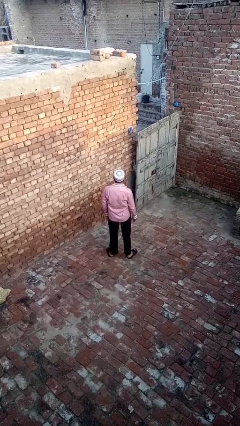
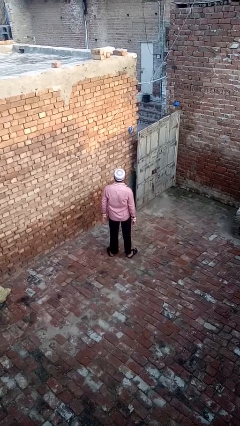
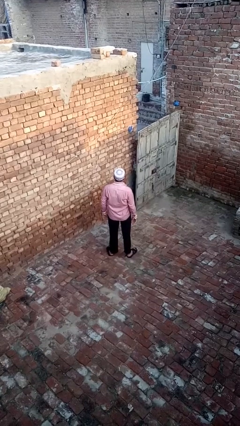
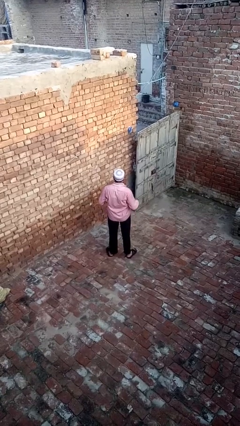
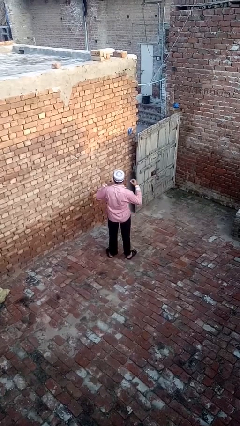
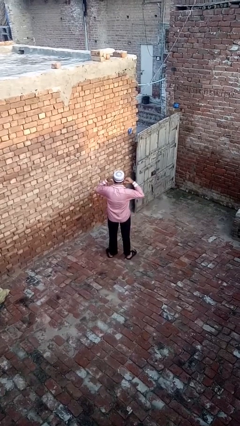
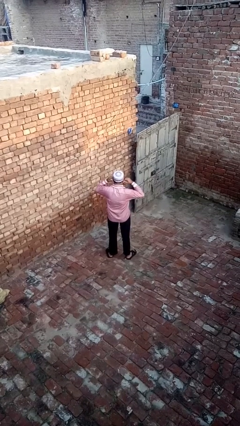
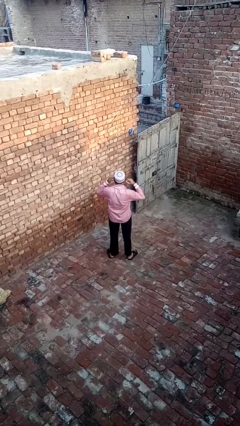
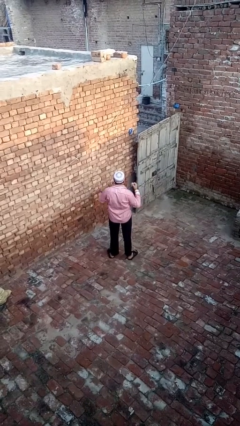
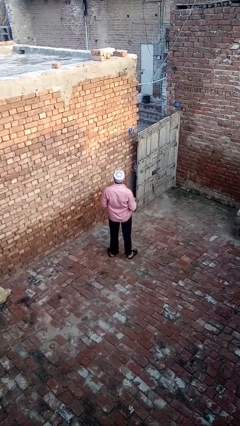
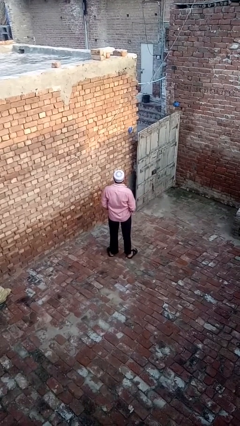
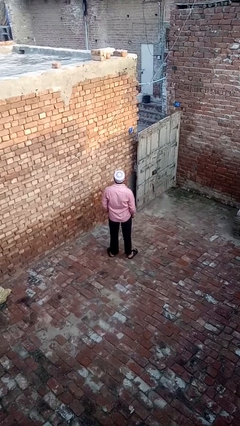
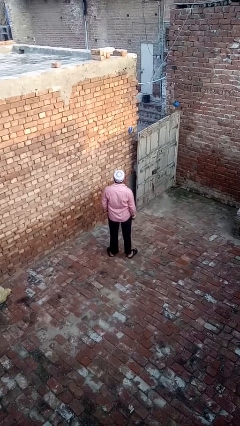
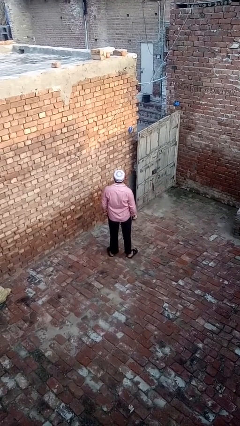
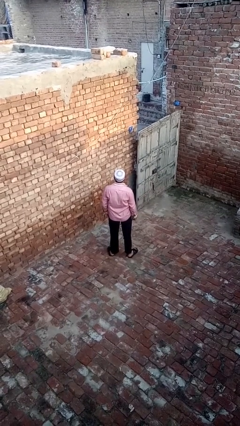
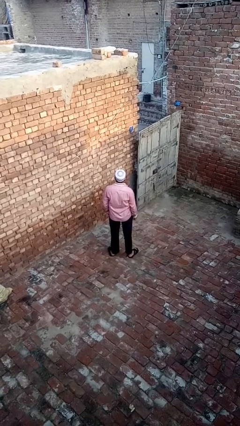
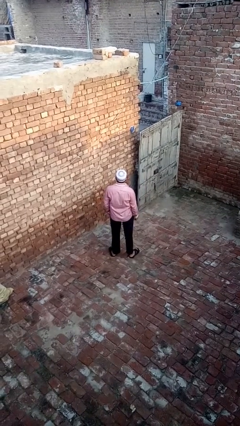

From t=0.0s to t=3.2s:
person takes off headphones

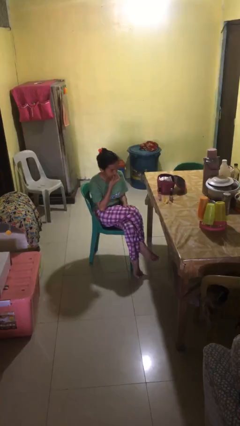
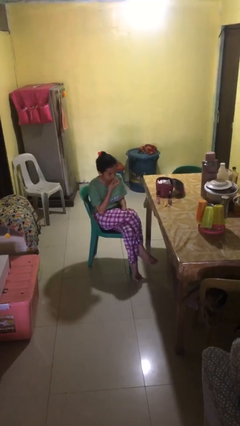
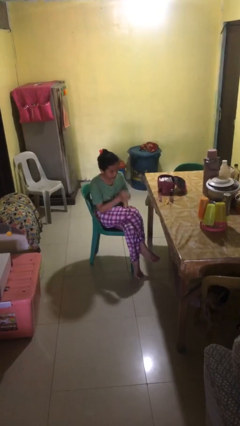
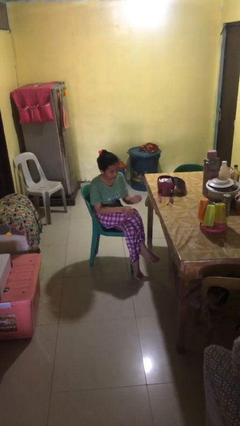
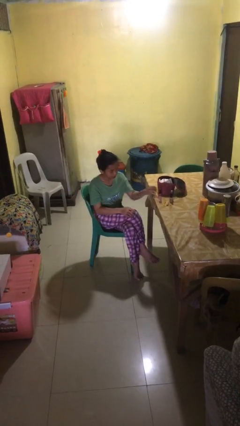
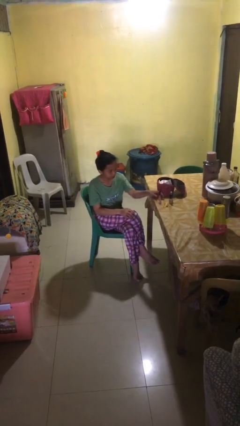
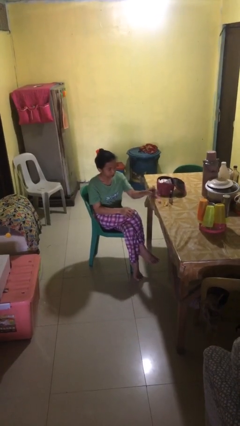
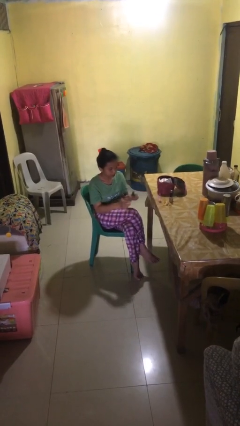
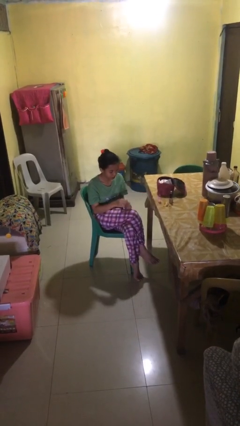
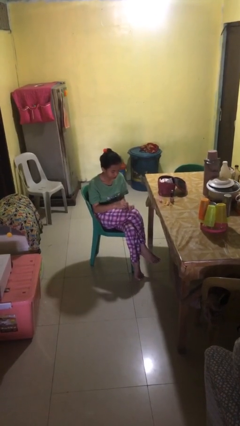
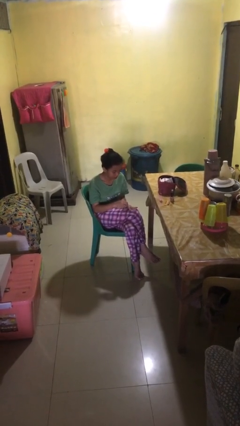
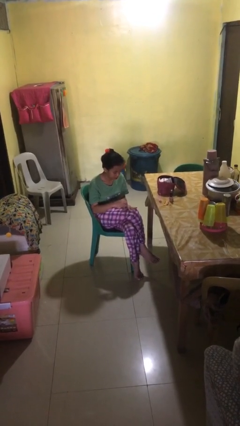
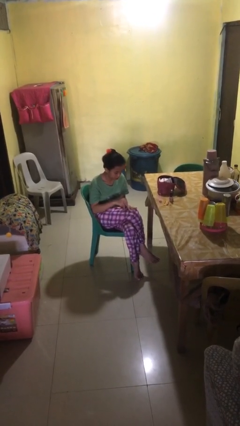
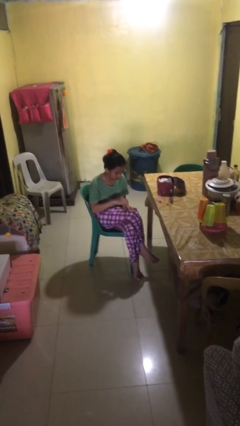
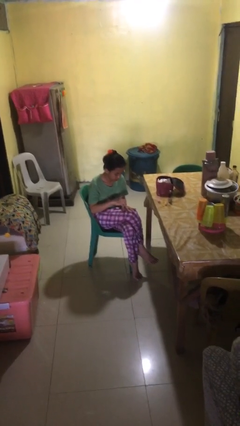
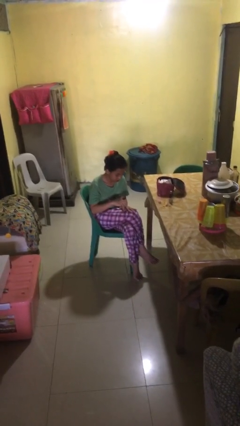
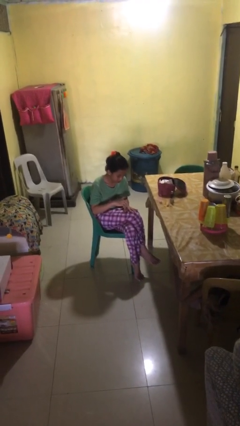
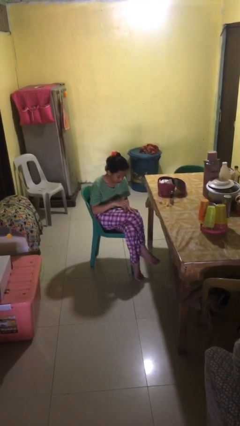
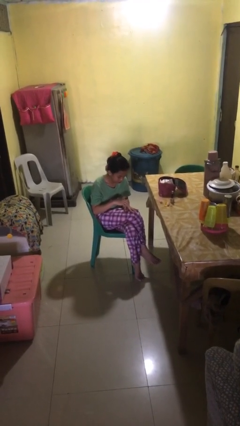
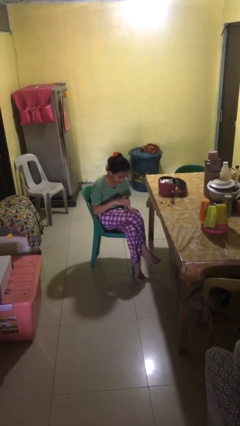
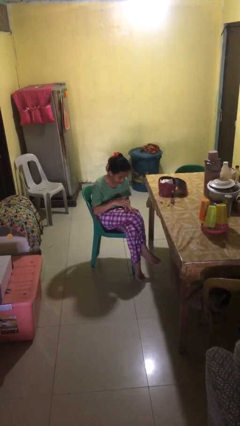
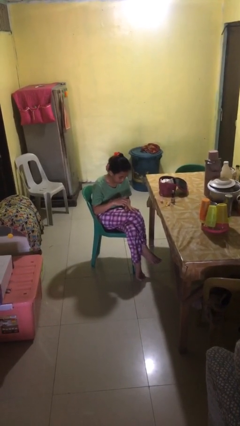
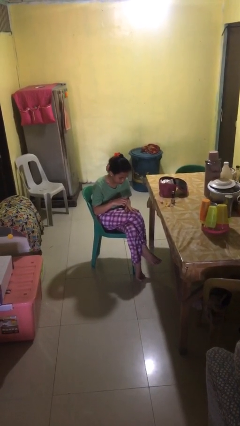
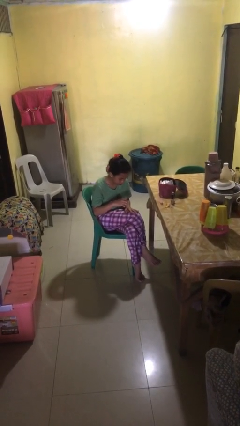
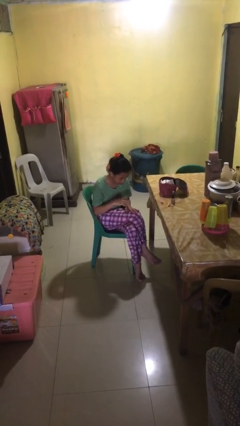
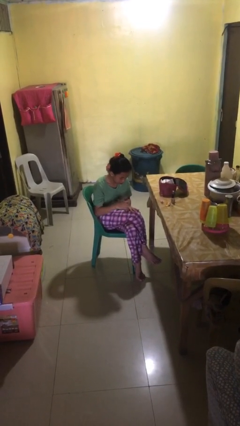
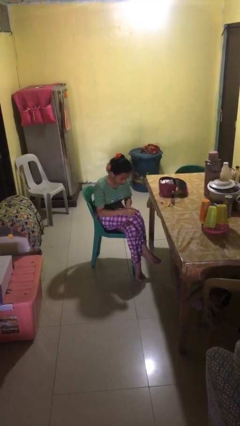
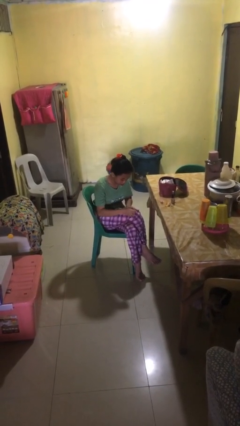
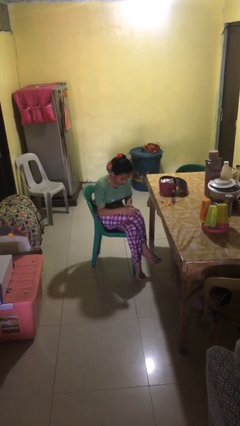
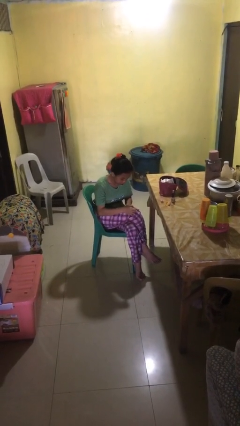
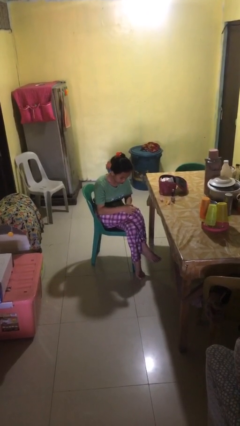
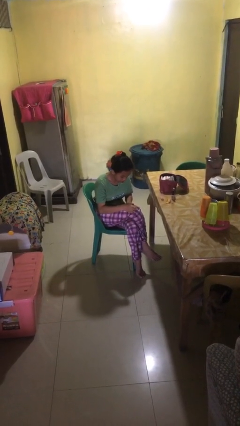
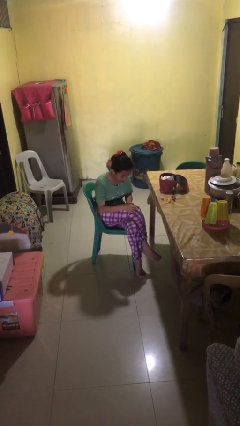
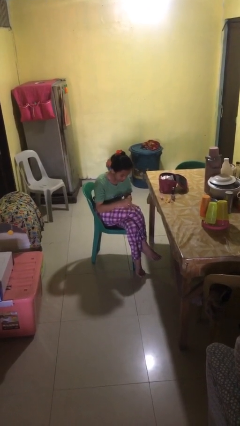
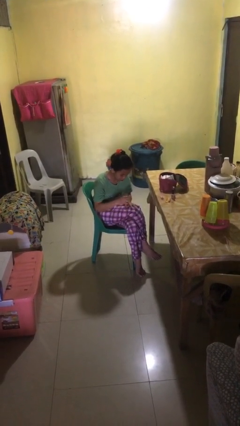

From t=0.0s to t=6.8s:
person paints fingernails

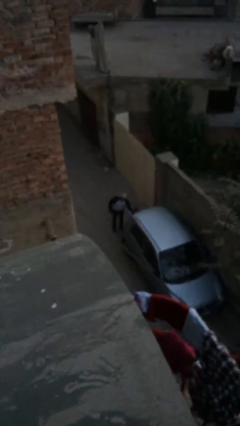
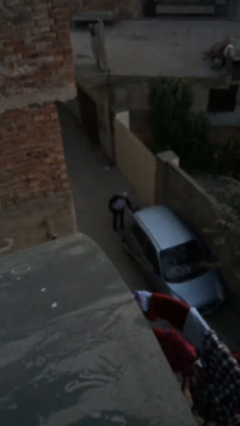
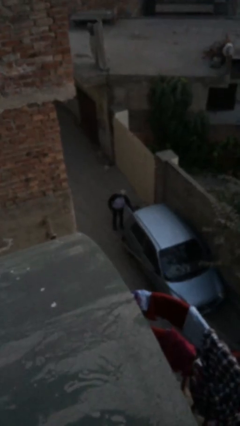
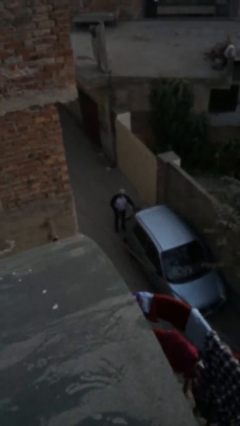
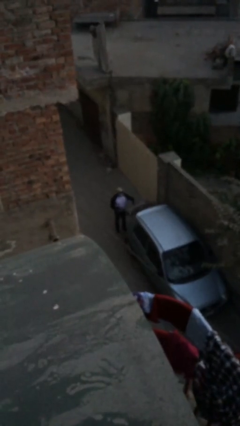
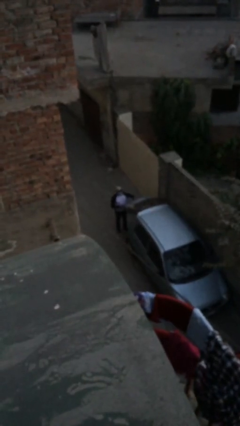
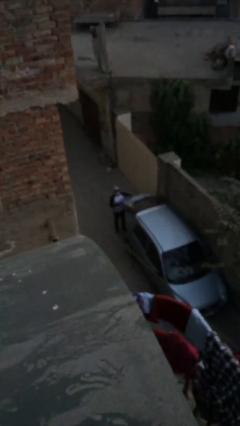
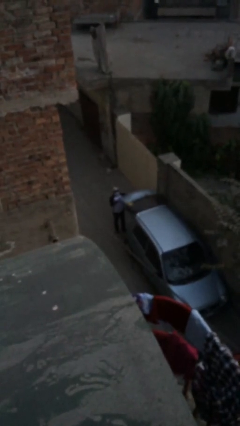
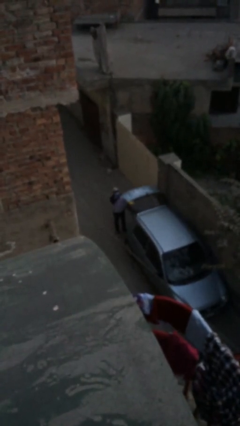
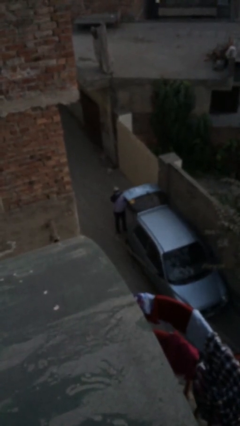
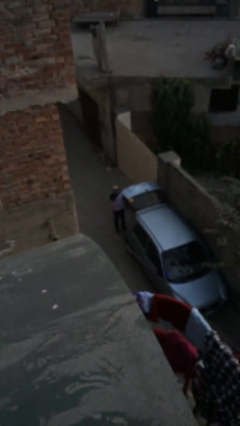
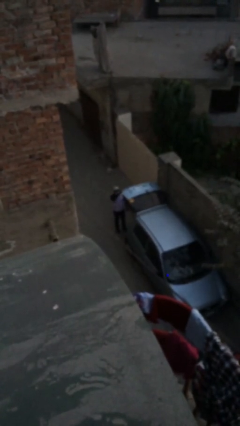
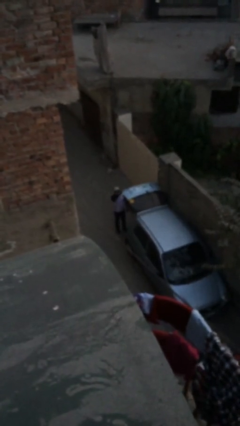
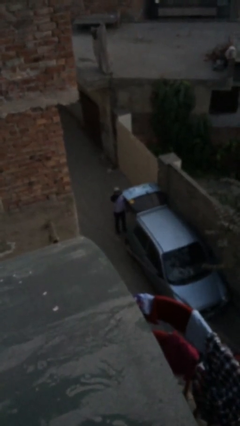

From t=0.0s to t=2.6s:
person opens car trunk

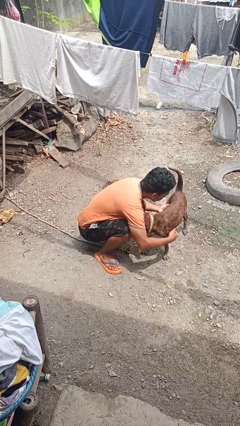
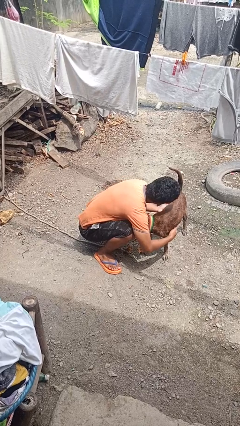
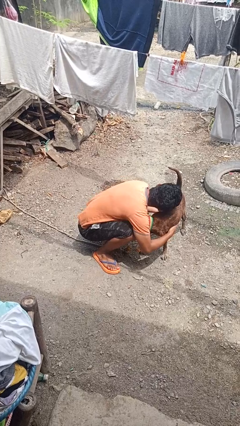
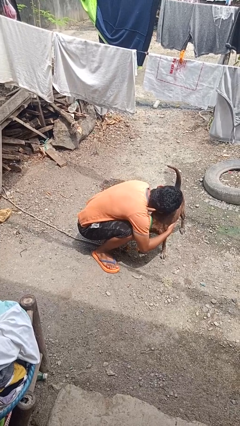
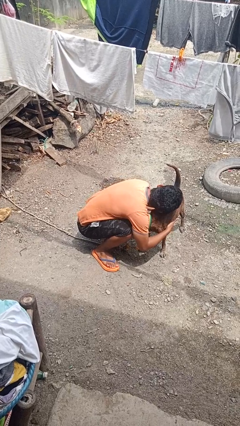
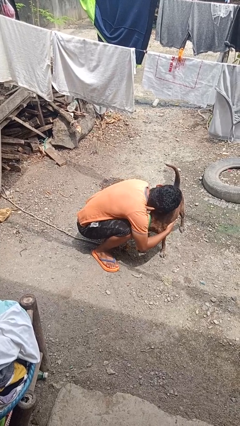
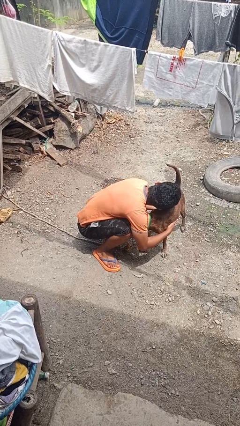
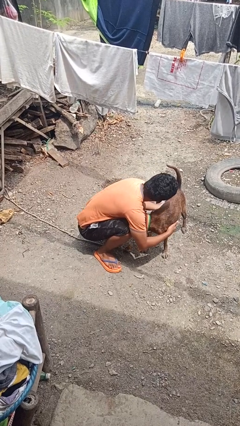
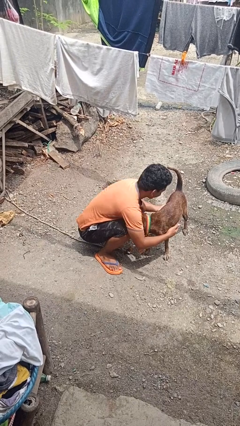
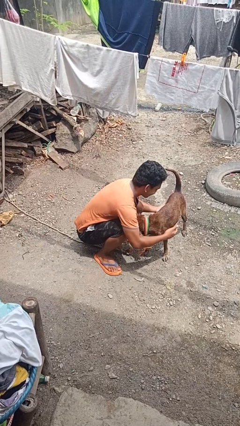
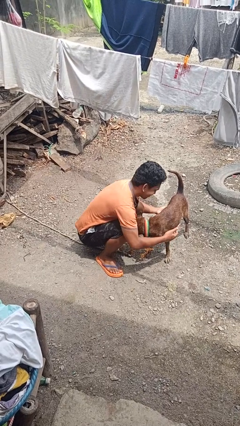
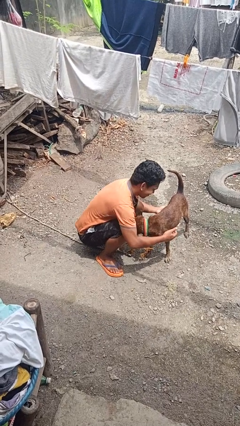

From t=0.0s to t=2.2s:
person hugs dog

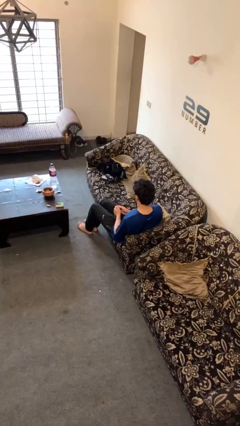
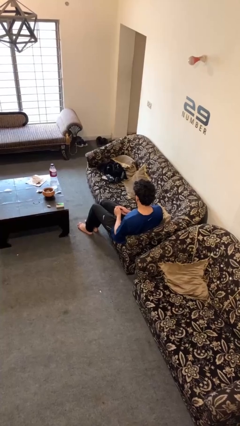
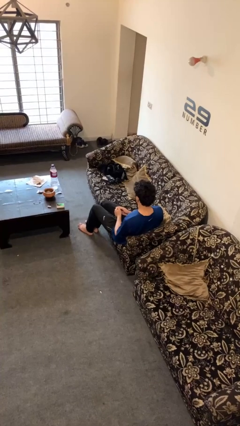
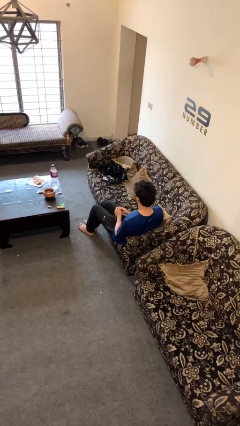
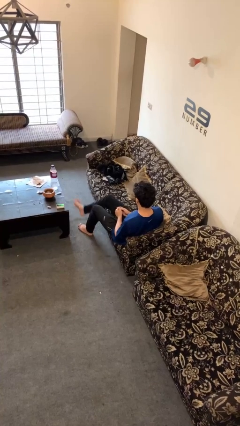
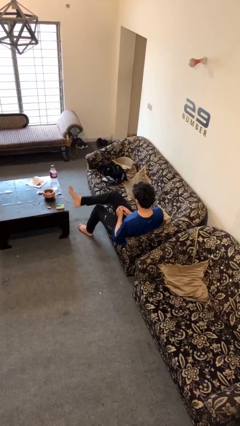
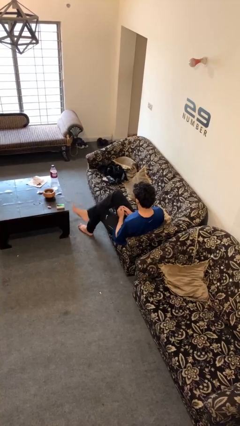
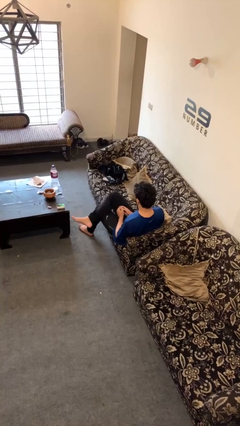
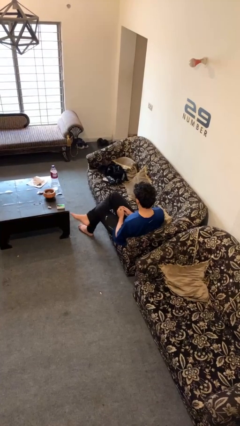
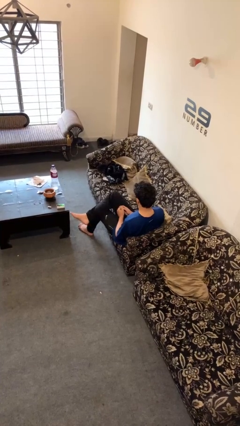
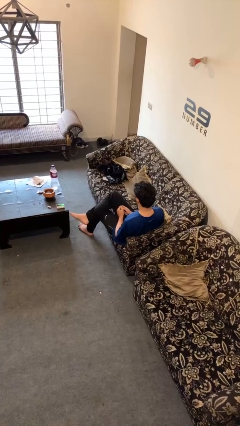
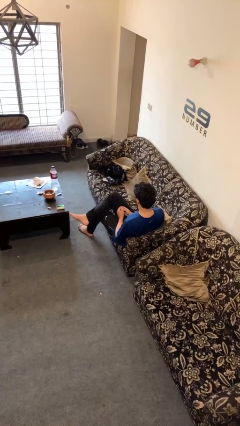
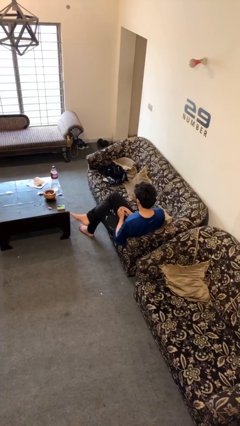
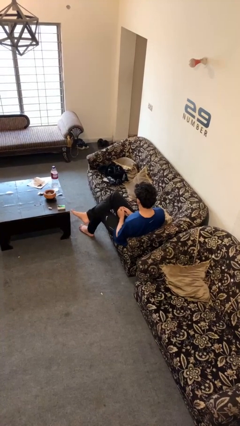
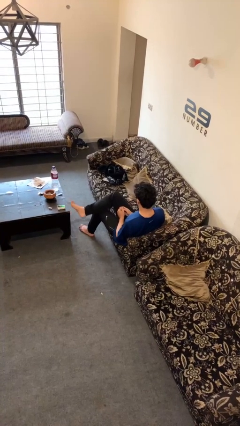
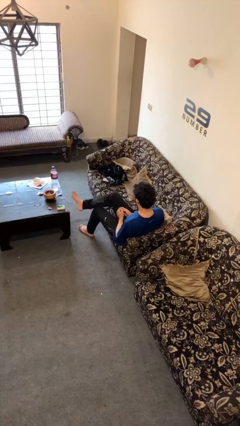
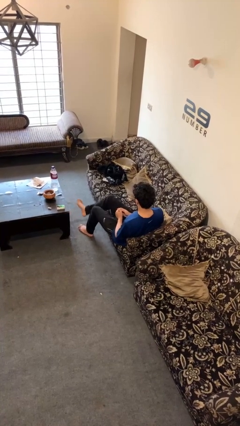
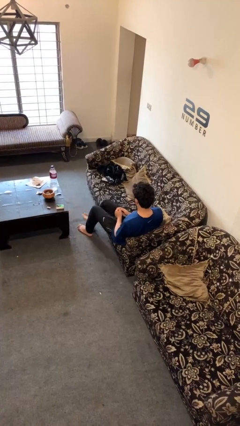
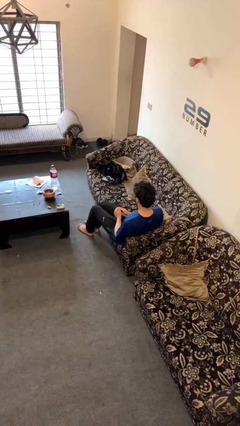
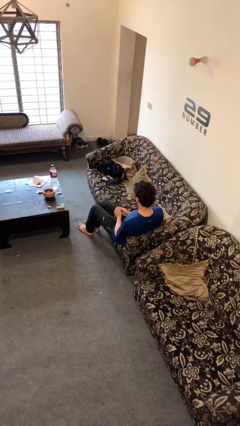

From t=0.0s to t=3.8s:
person crosses legs
